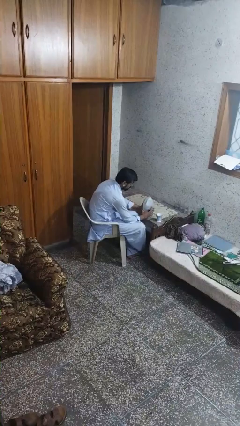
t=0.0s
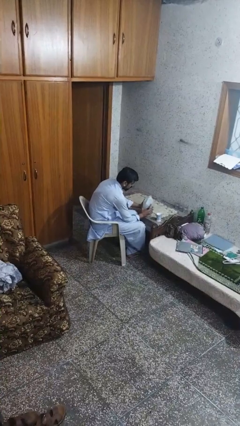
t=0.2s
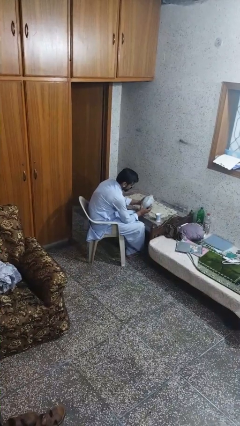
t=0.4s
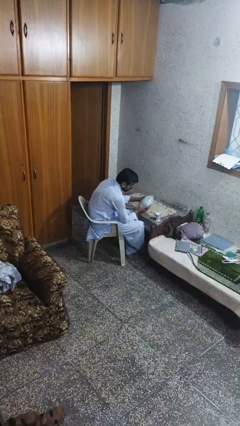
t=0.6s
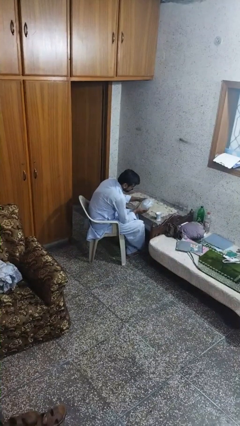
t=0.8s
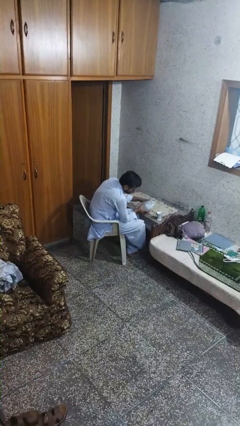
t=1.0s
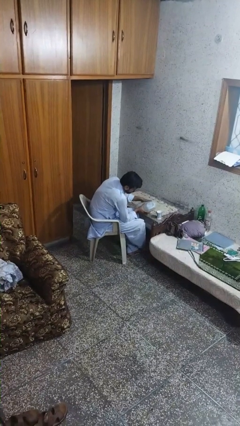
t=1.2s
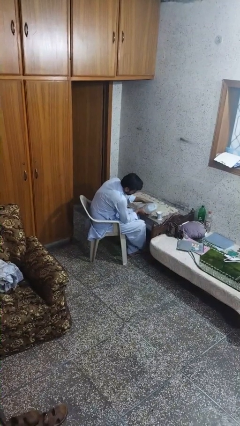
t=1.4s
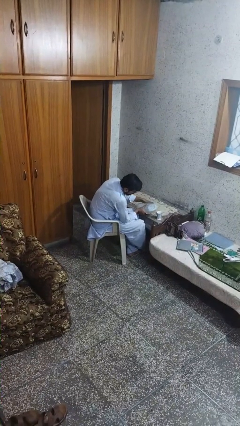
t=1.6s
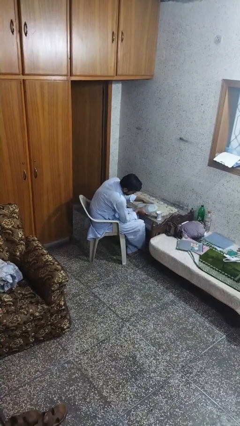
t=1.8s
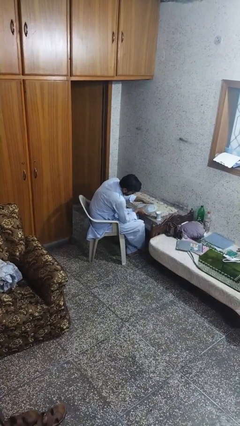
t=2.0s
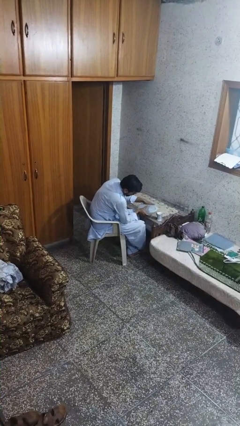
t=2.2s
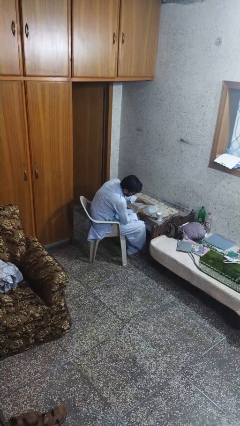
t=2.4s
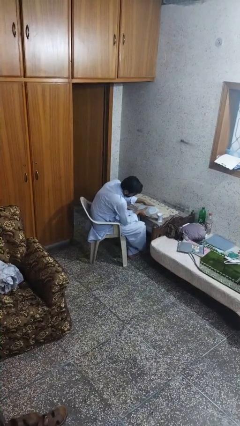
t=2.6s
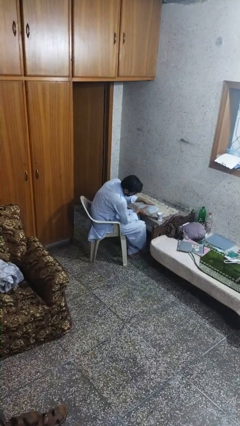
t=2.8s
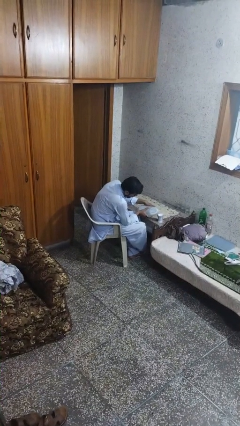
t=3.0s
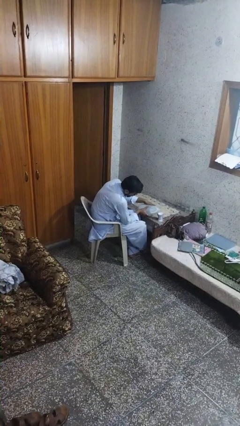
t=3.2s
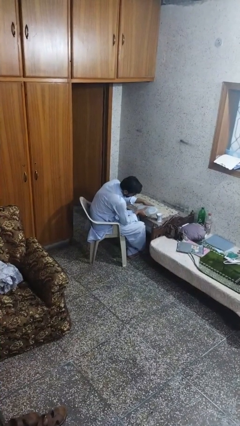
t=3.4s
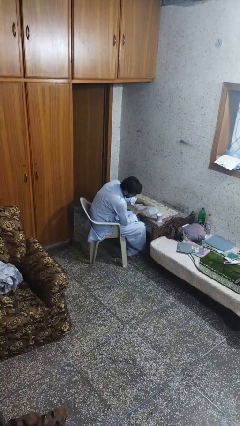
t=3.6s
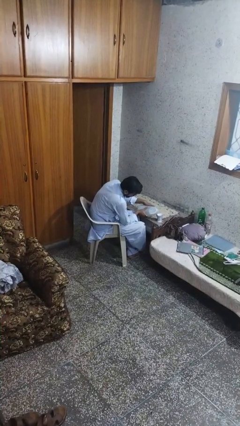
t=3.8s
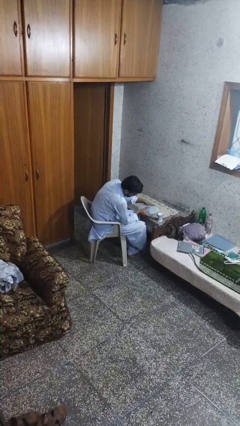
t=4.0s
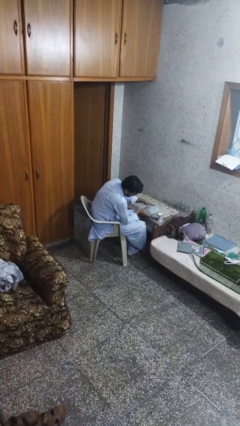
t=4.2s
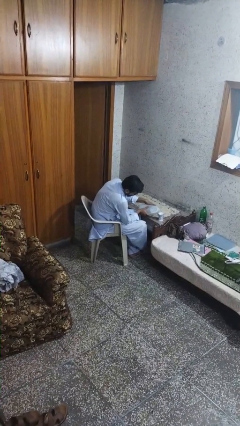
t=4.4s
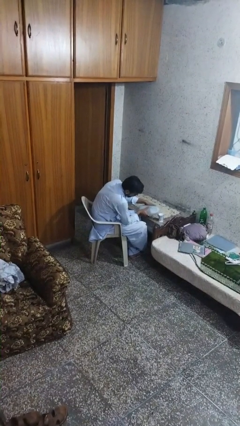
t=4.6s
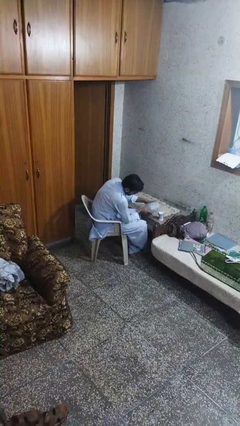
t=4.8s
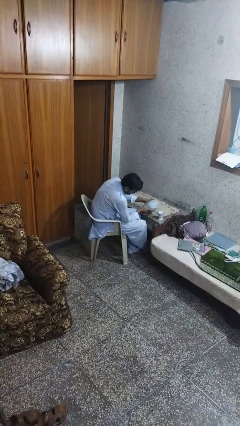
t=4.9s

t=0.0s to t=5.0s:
person pours liquid into cup

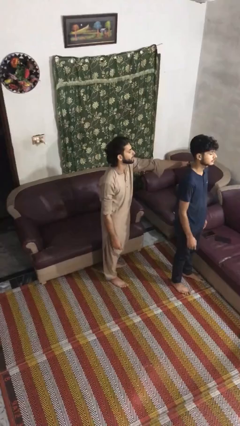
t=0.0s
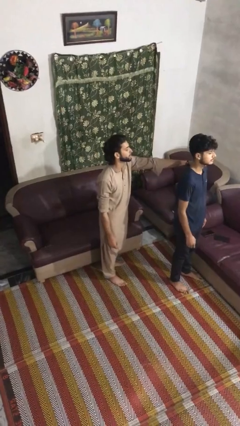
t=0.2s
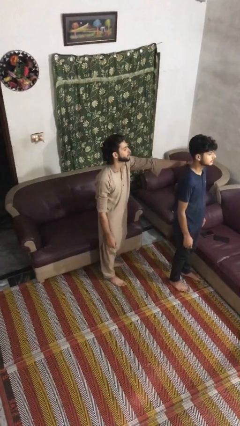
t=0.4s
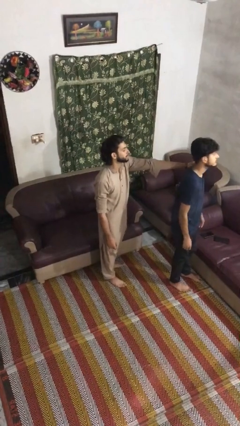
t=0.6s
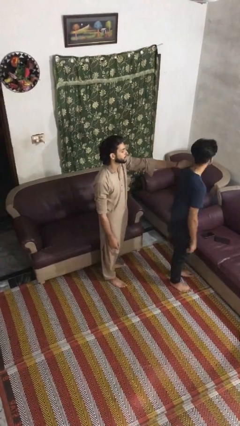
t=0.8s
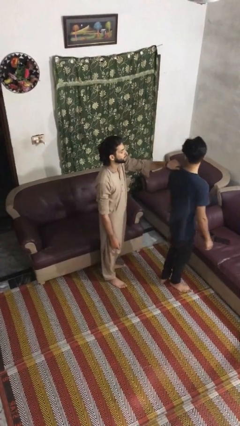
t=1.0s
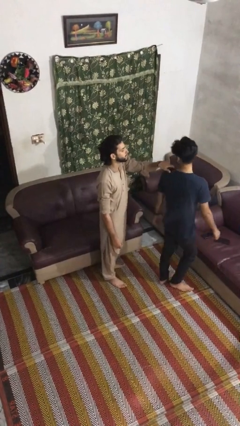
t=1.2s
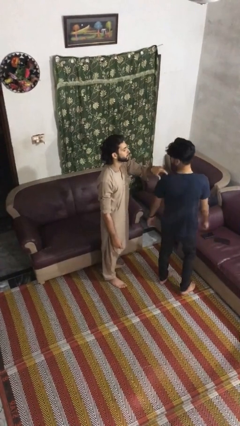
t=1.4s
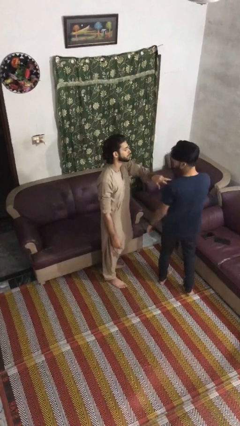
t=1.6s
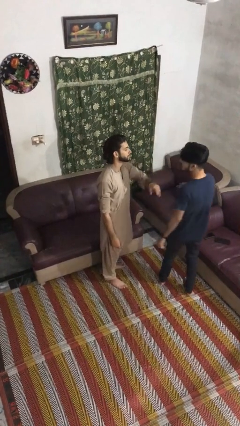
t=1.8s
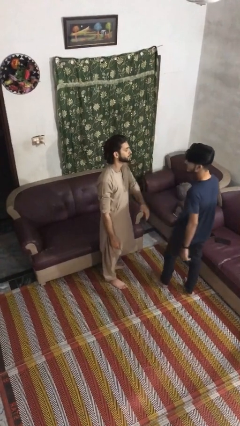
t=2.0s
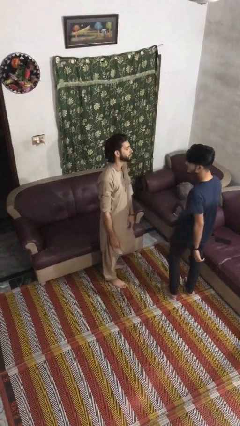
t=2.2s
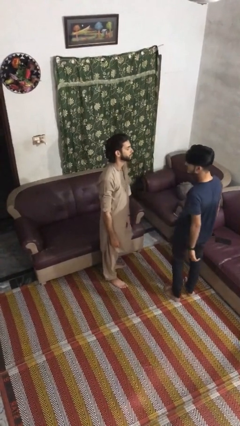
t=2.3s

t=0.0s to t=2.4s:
person spins person around

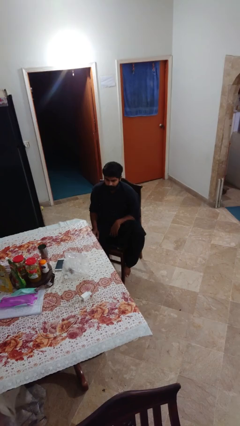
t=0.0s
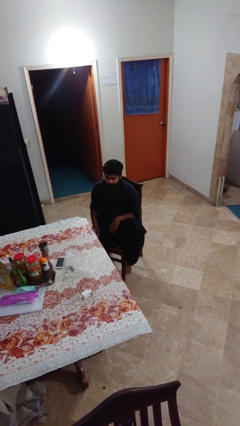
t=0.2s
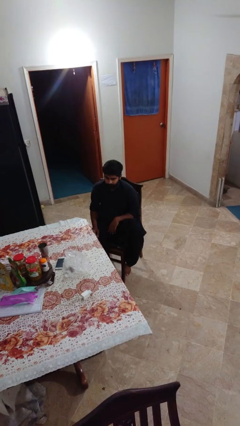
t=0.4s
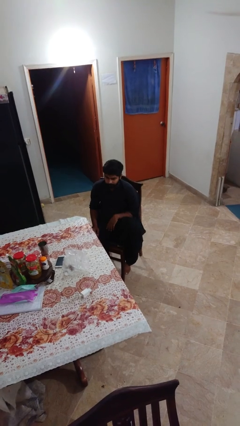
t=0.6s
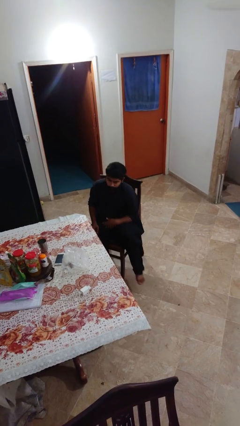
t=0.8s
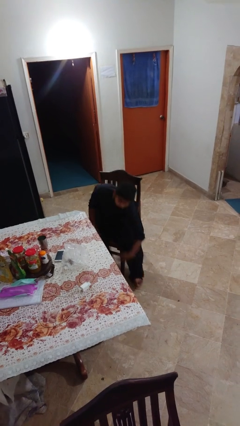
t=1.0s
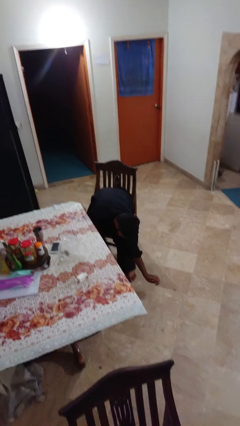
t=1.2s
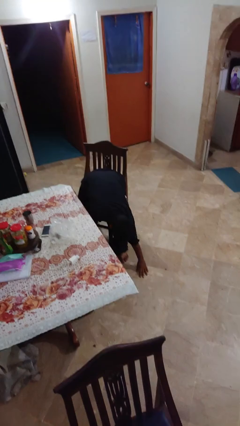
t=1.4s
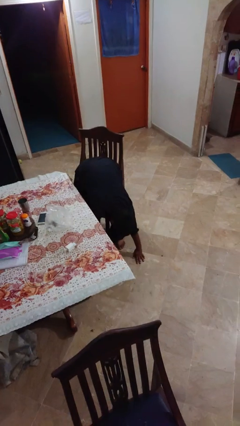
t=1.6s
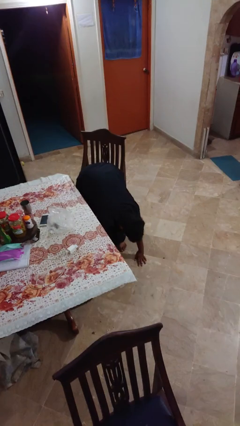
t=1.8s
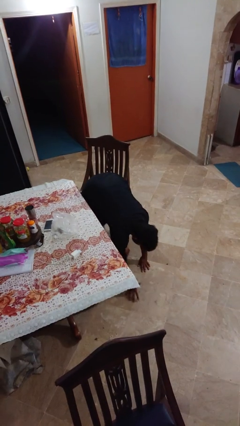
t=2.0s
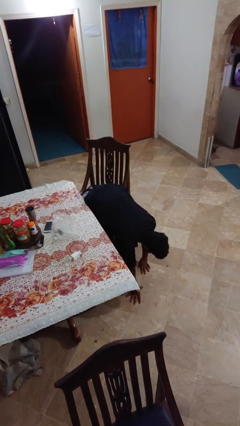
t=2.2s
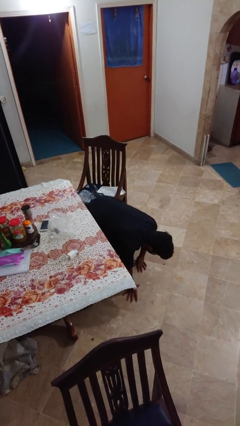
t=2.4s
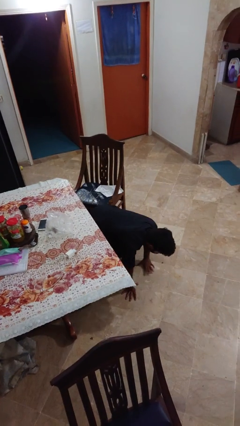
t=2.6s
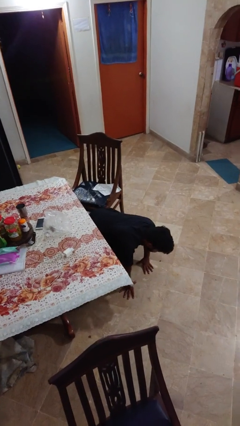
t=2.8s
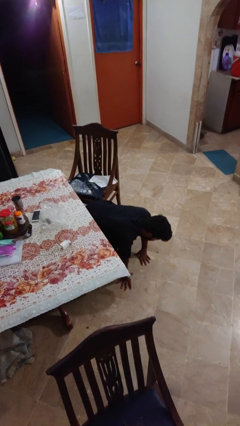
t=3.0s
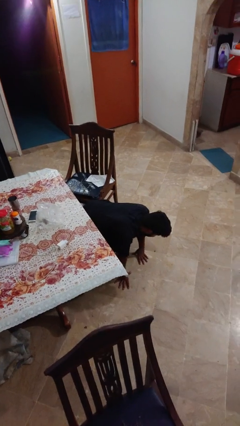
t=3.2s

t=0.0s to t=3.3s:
person falls from chair

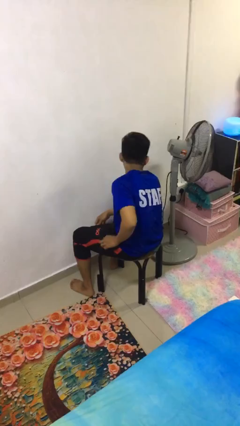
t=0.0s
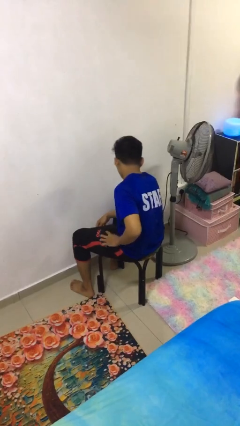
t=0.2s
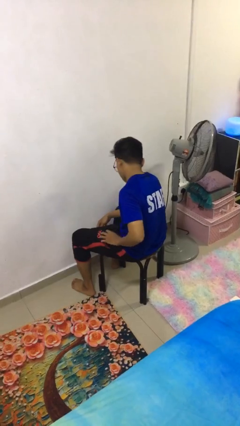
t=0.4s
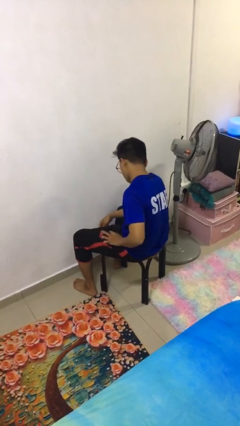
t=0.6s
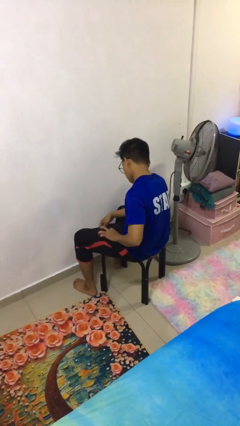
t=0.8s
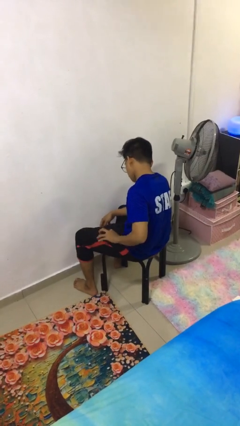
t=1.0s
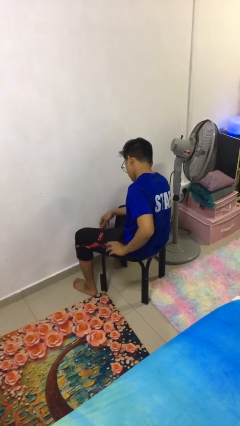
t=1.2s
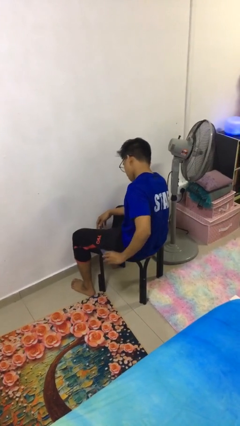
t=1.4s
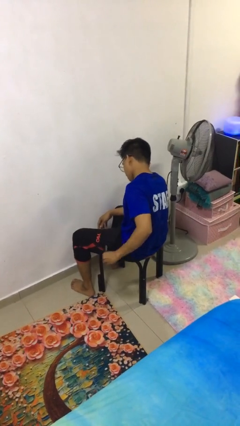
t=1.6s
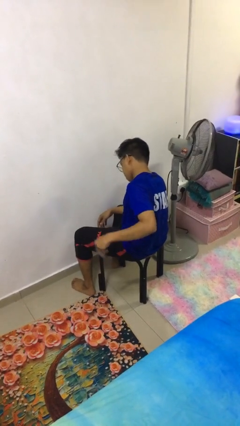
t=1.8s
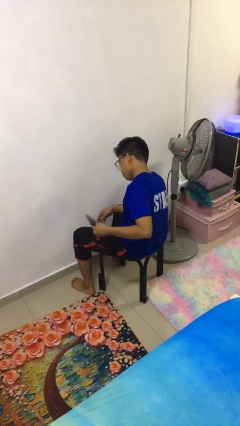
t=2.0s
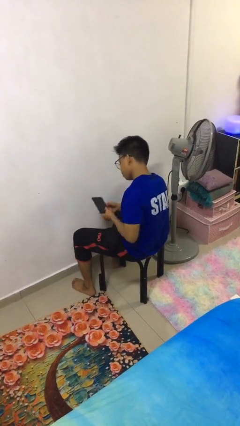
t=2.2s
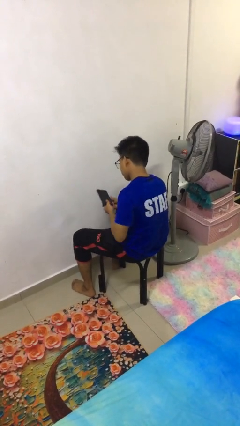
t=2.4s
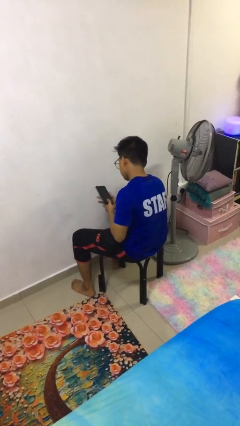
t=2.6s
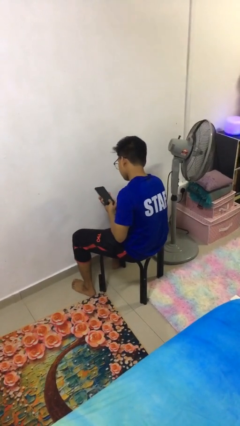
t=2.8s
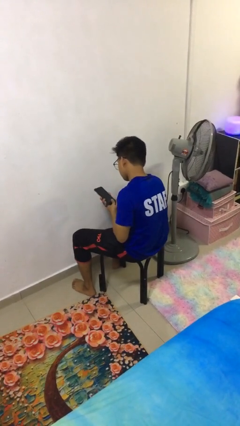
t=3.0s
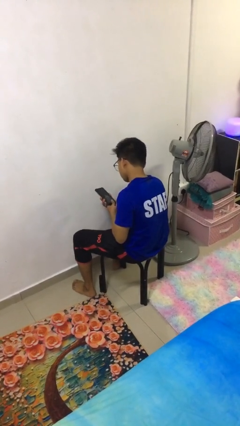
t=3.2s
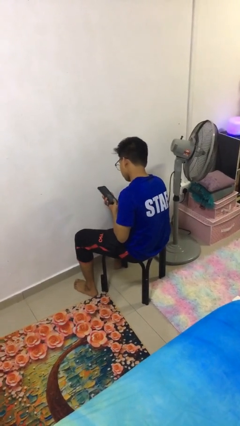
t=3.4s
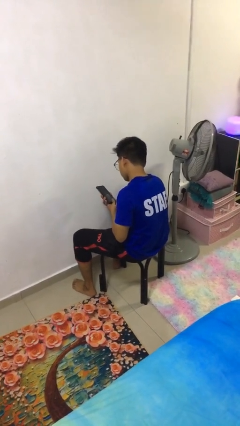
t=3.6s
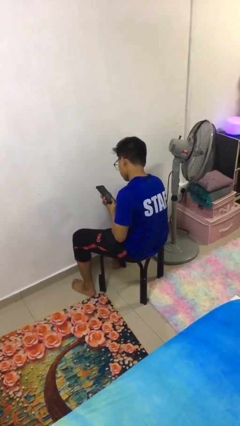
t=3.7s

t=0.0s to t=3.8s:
person takes phone from pocket

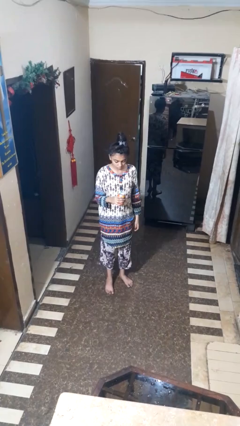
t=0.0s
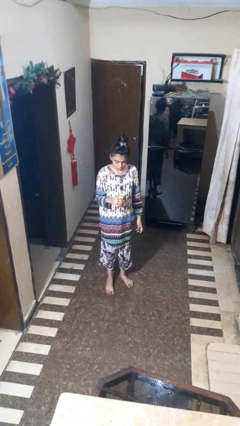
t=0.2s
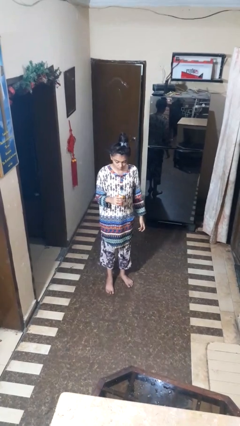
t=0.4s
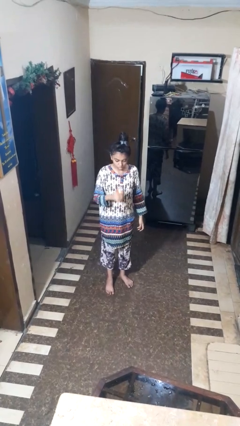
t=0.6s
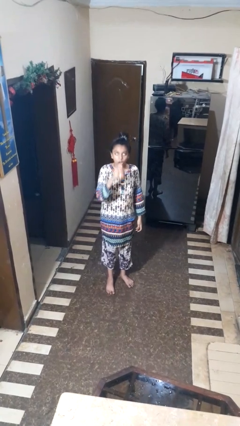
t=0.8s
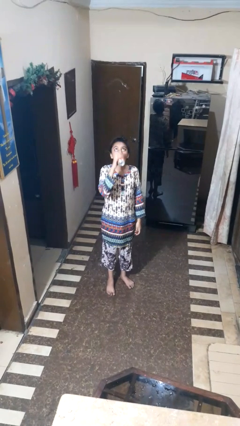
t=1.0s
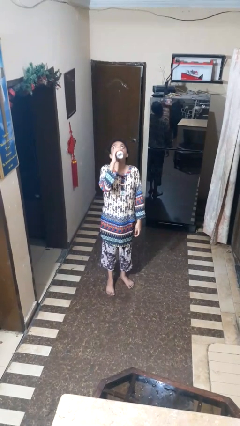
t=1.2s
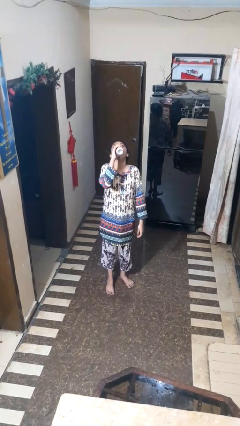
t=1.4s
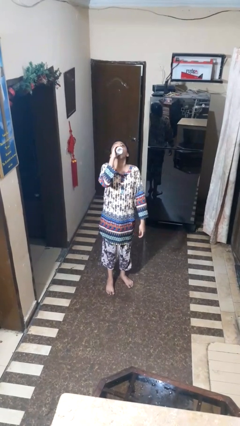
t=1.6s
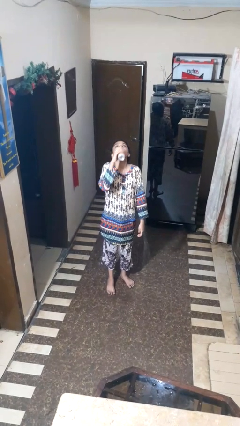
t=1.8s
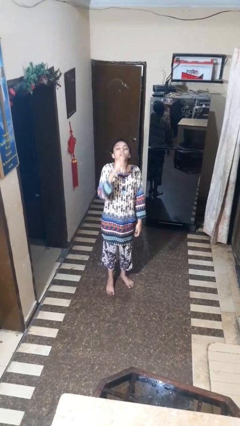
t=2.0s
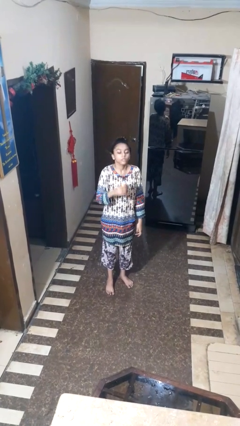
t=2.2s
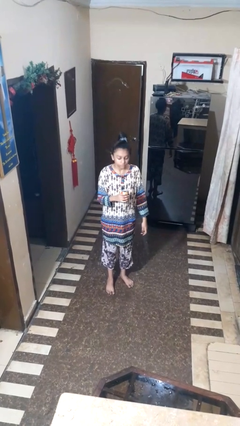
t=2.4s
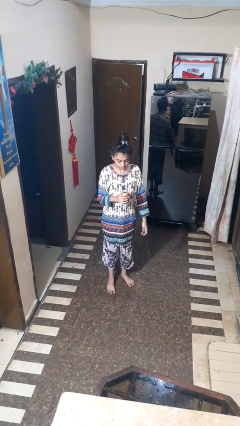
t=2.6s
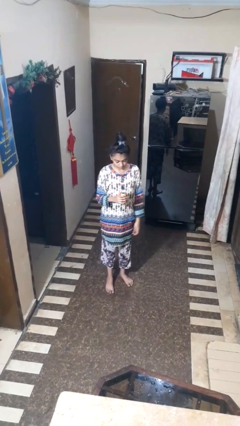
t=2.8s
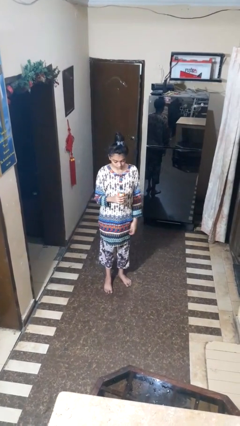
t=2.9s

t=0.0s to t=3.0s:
person drinks from beverage can
